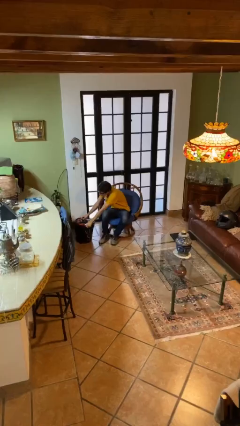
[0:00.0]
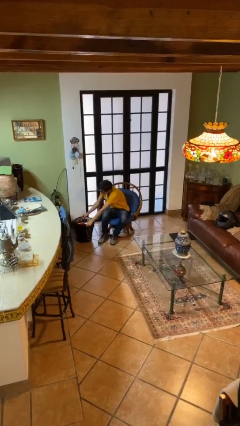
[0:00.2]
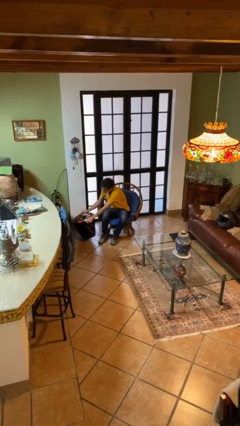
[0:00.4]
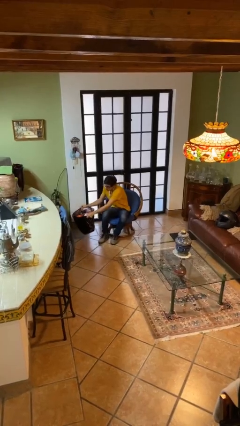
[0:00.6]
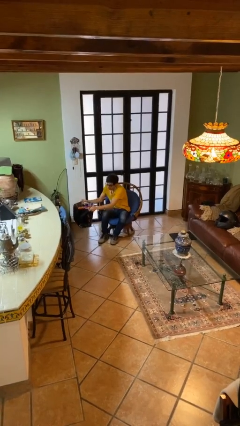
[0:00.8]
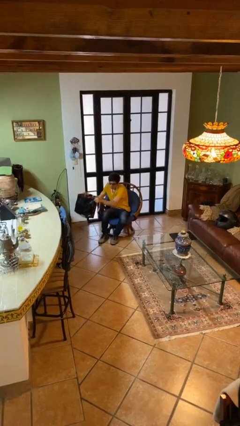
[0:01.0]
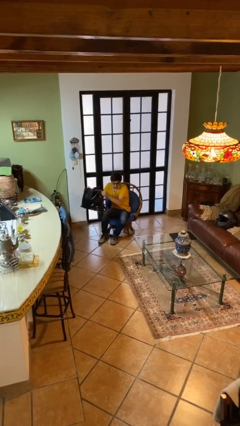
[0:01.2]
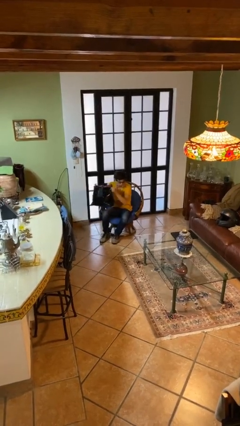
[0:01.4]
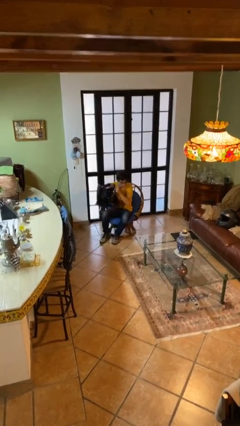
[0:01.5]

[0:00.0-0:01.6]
person picks up object from floor

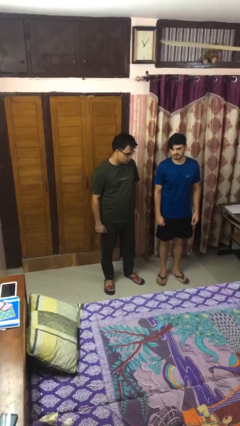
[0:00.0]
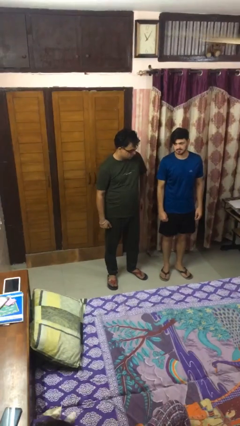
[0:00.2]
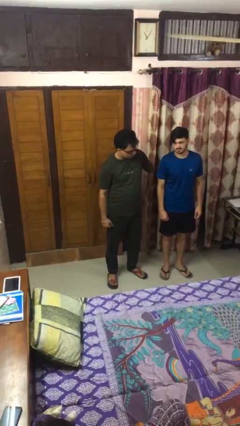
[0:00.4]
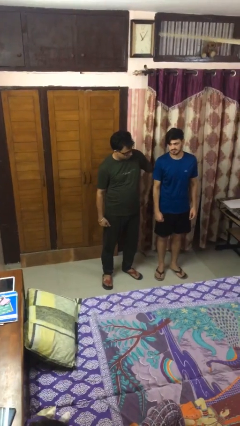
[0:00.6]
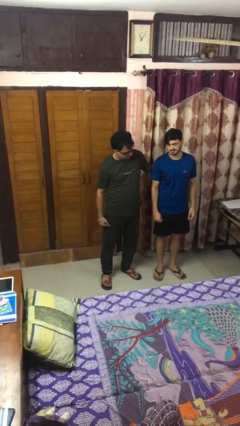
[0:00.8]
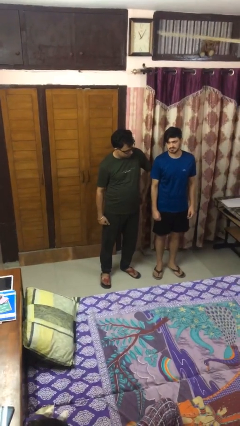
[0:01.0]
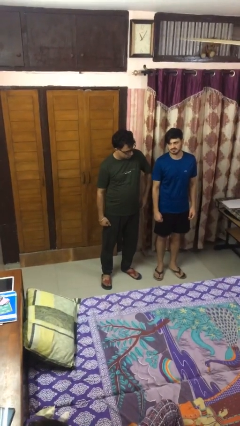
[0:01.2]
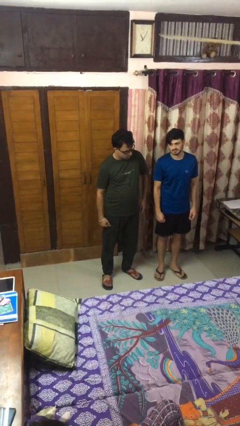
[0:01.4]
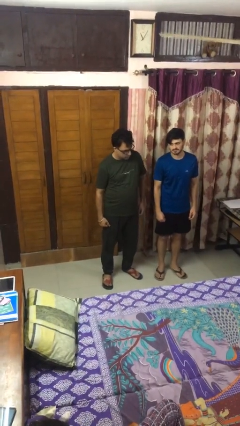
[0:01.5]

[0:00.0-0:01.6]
person nudges person with elbow

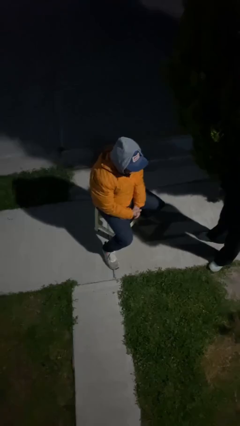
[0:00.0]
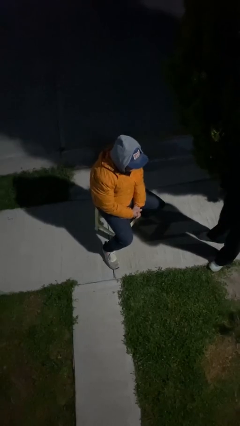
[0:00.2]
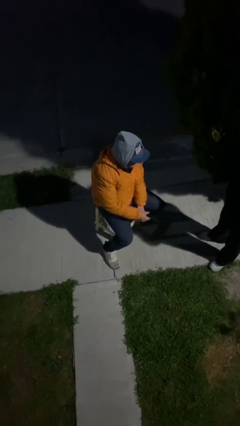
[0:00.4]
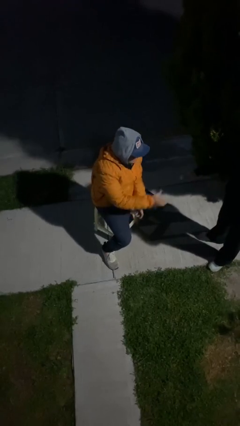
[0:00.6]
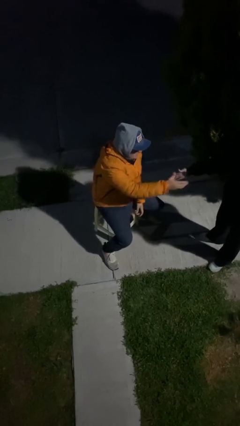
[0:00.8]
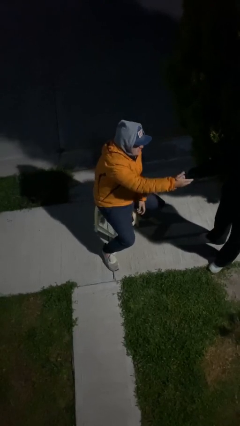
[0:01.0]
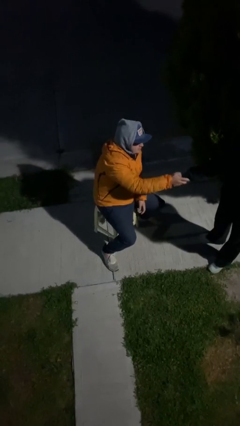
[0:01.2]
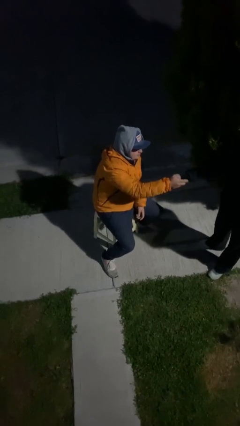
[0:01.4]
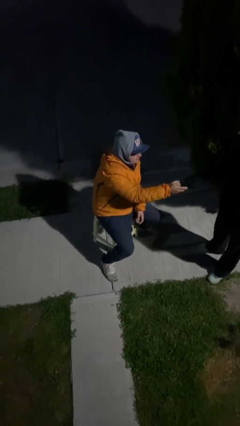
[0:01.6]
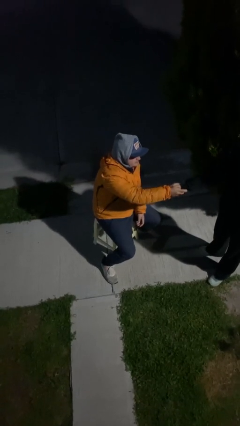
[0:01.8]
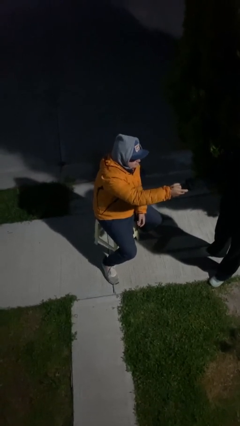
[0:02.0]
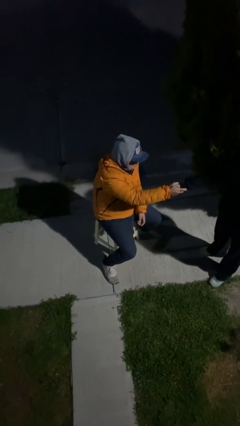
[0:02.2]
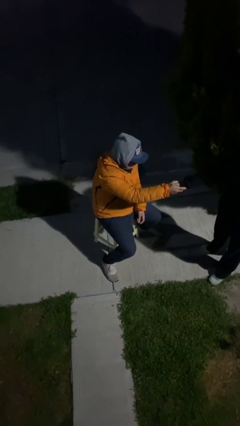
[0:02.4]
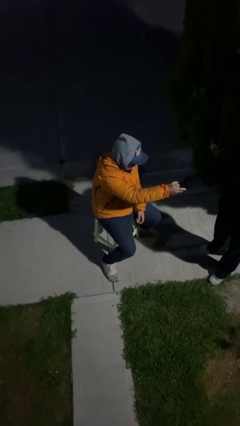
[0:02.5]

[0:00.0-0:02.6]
person shakes hand

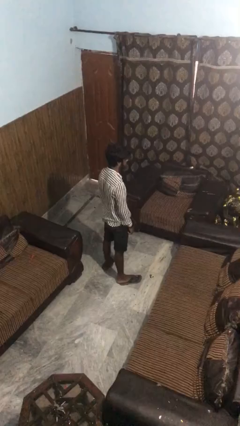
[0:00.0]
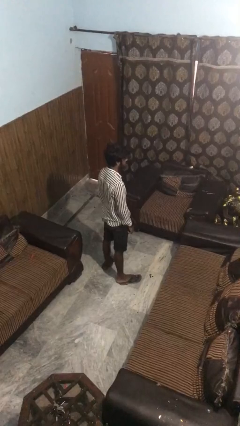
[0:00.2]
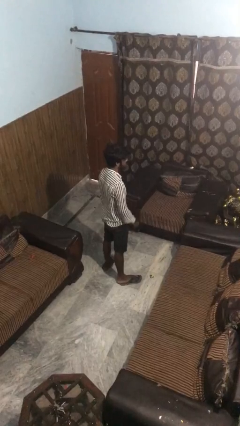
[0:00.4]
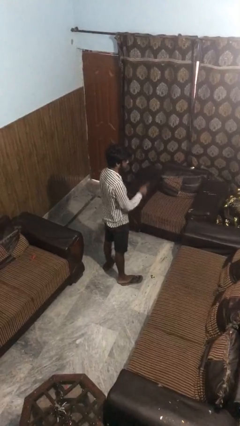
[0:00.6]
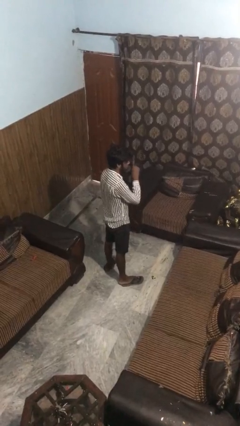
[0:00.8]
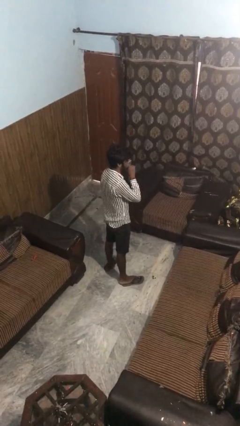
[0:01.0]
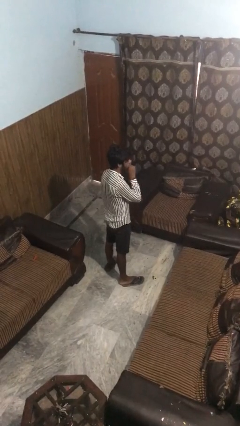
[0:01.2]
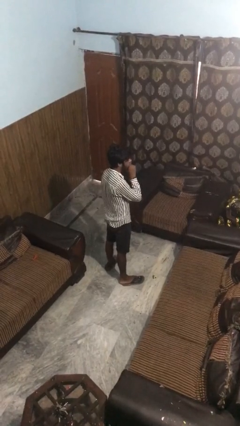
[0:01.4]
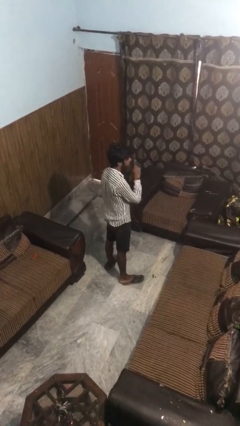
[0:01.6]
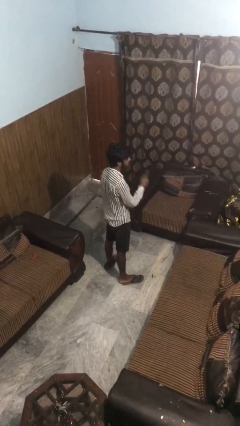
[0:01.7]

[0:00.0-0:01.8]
person gestures be quiet

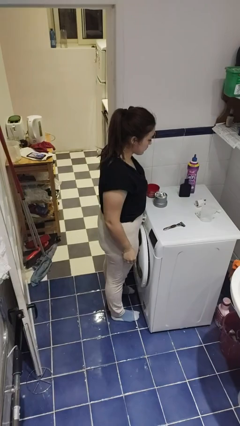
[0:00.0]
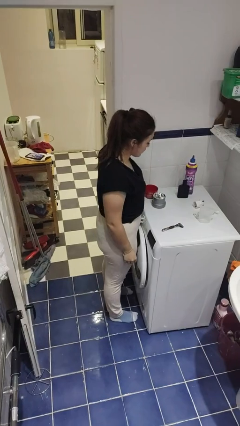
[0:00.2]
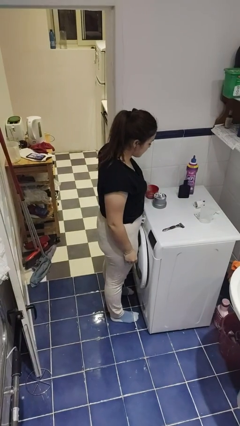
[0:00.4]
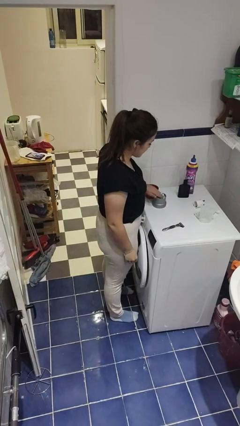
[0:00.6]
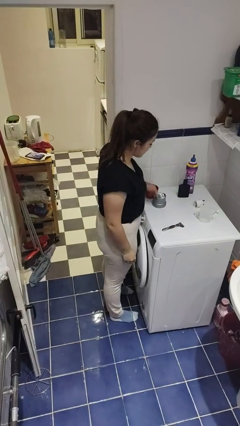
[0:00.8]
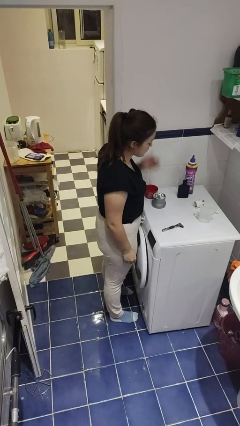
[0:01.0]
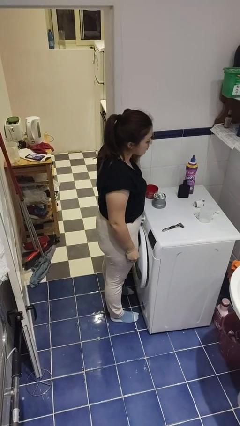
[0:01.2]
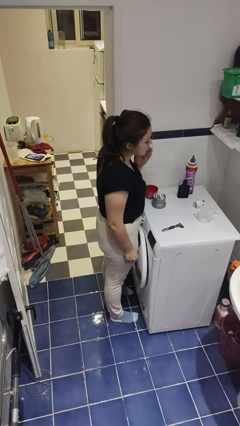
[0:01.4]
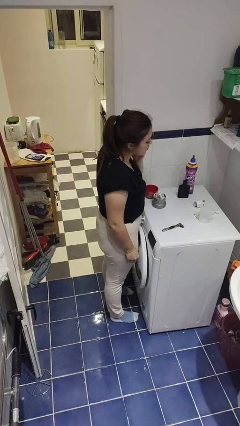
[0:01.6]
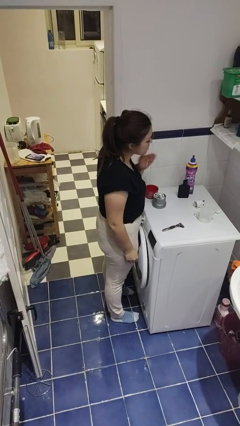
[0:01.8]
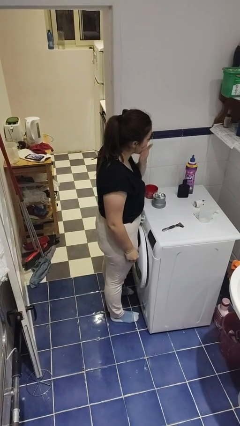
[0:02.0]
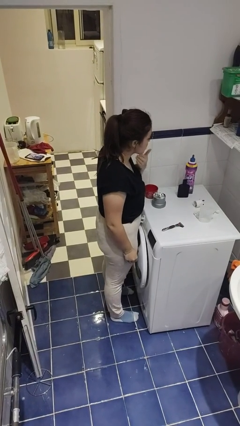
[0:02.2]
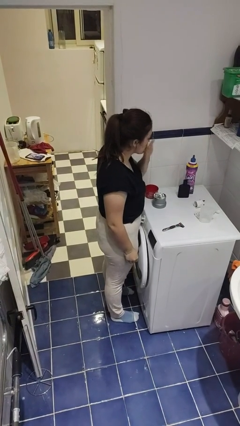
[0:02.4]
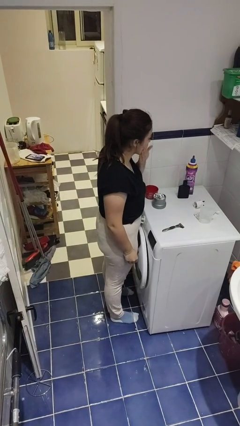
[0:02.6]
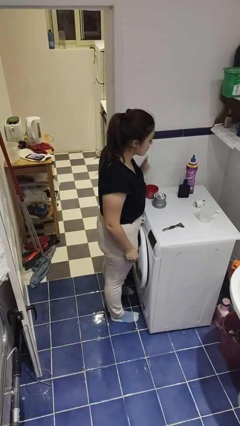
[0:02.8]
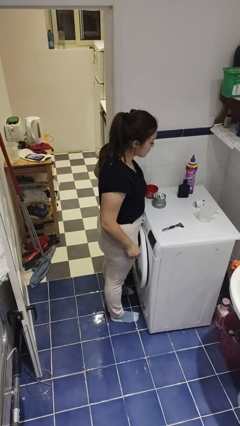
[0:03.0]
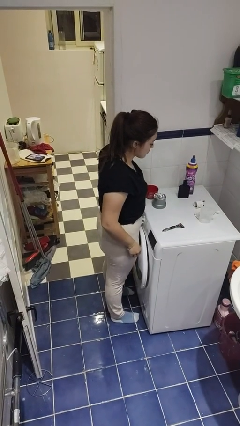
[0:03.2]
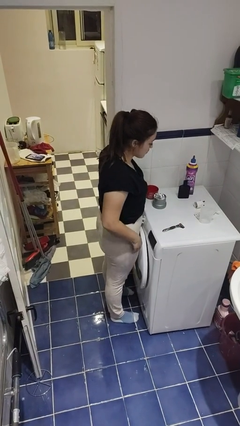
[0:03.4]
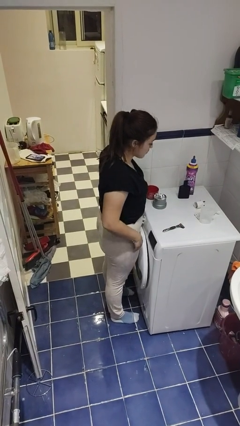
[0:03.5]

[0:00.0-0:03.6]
person applies shaving cream

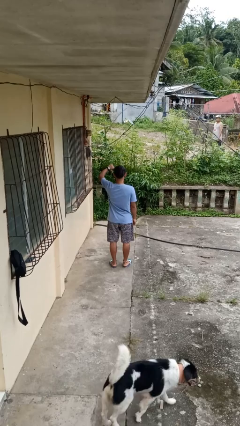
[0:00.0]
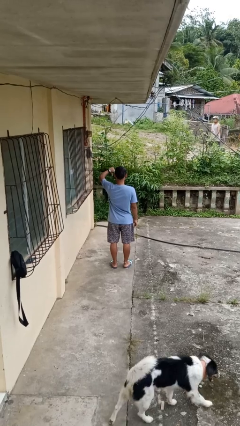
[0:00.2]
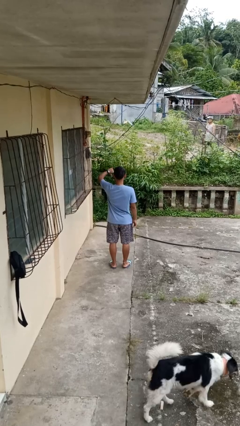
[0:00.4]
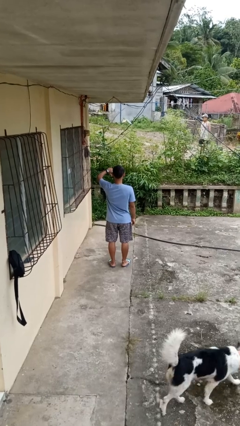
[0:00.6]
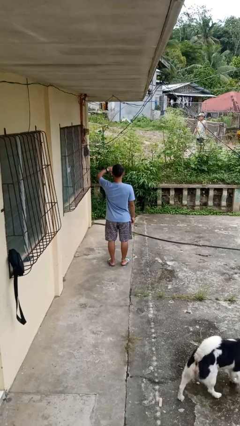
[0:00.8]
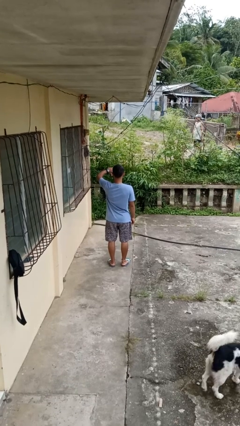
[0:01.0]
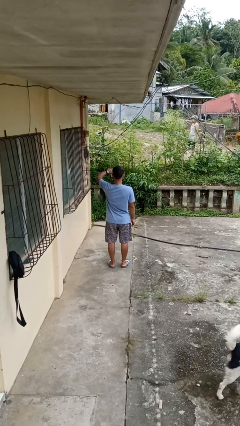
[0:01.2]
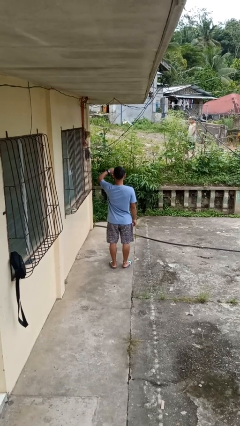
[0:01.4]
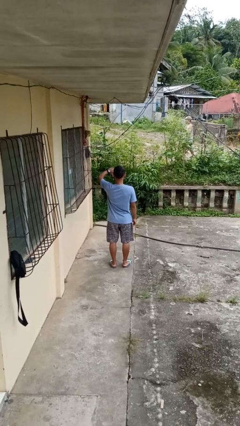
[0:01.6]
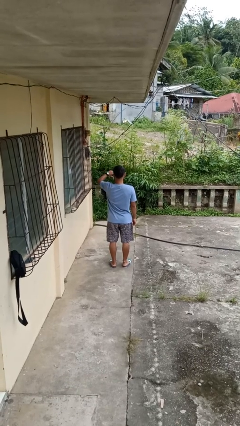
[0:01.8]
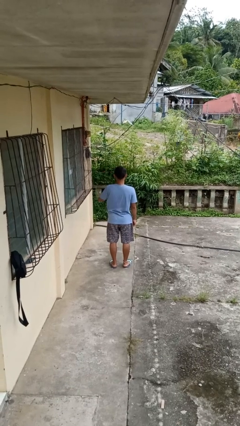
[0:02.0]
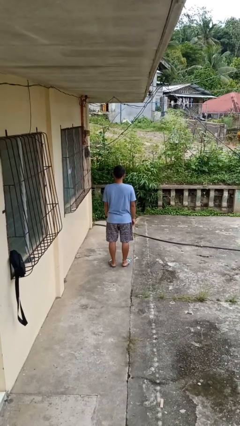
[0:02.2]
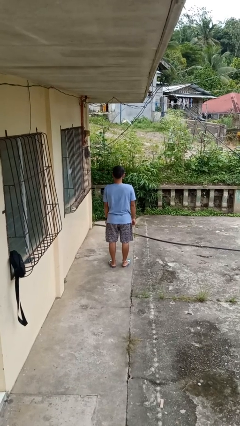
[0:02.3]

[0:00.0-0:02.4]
person gestures thumbs down

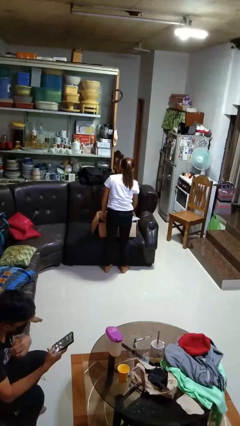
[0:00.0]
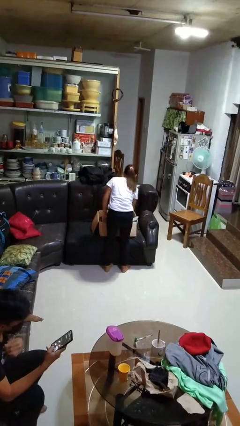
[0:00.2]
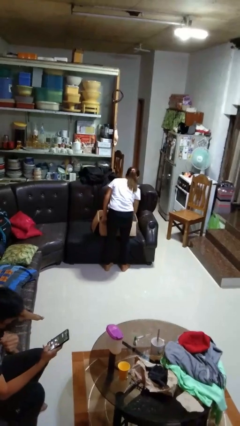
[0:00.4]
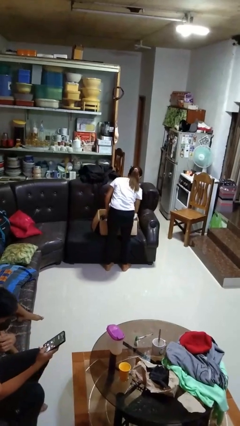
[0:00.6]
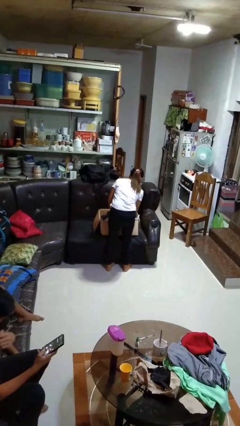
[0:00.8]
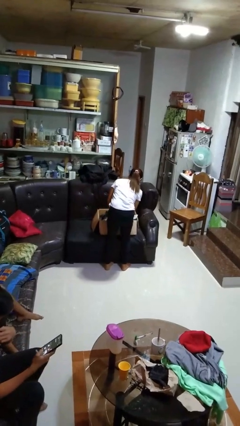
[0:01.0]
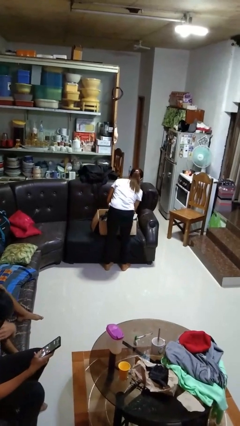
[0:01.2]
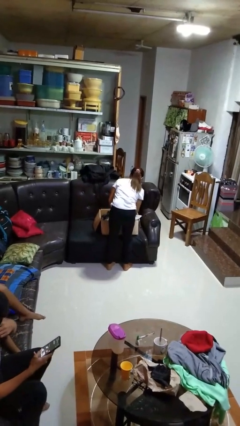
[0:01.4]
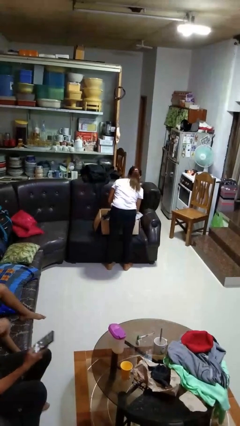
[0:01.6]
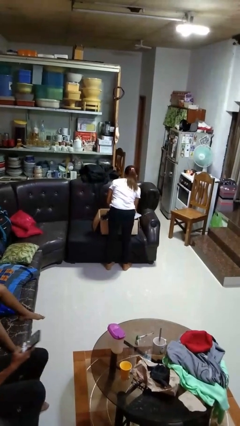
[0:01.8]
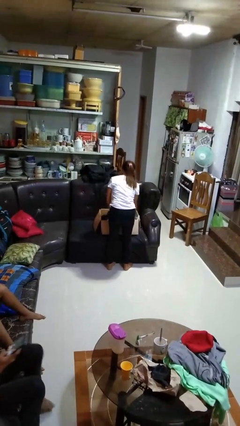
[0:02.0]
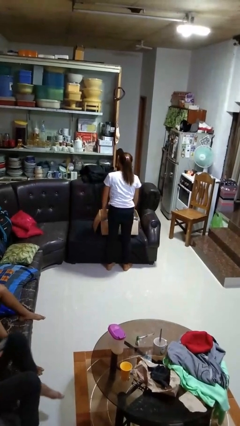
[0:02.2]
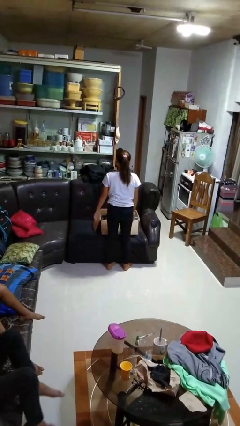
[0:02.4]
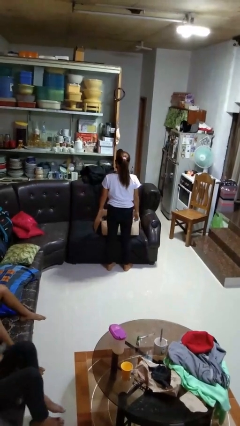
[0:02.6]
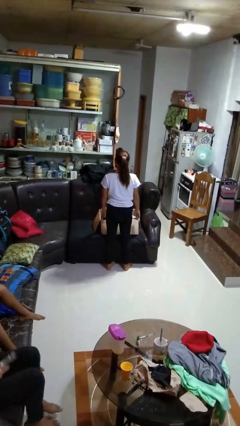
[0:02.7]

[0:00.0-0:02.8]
person searches in box

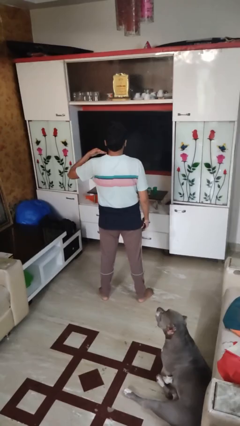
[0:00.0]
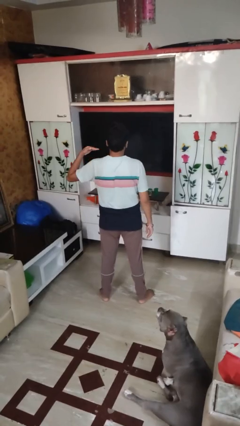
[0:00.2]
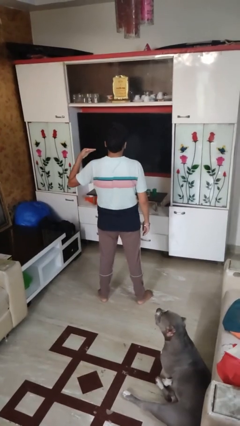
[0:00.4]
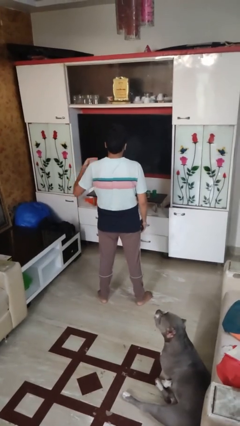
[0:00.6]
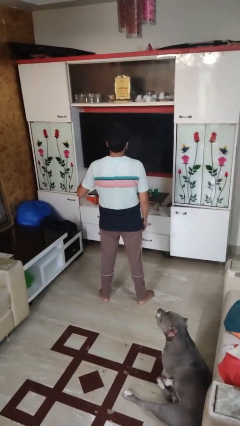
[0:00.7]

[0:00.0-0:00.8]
person gestures cut
